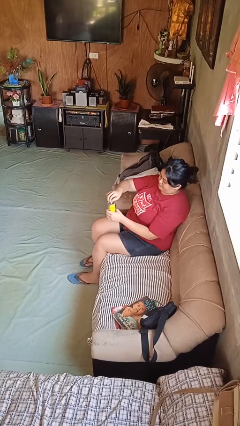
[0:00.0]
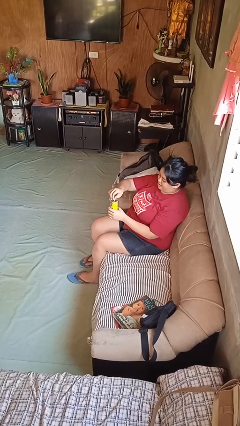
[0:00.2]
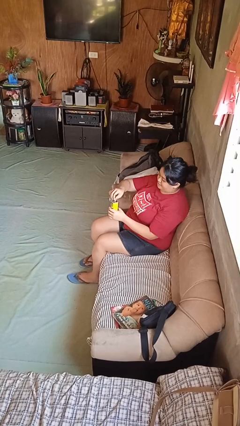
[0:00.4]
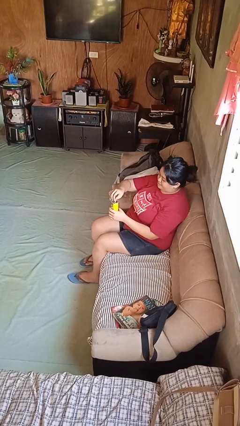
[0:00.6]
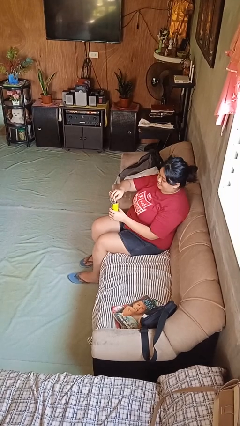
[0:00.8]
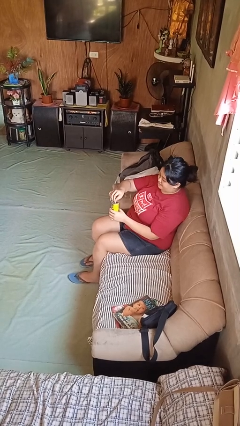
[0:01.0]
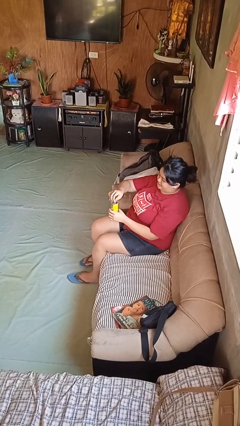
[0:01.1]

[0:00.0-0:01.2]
person opens beverage can

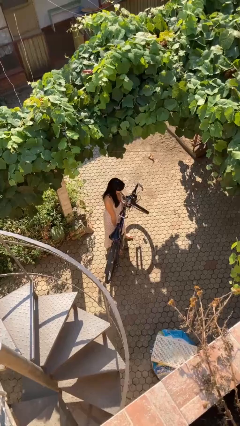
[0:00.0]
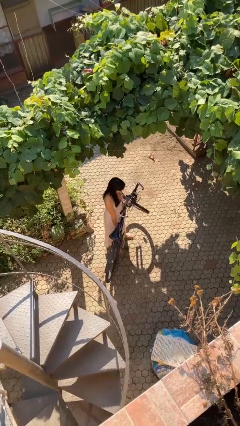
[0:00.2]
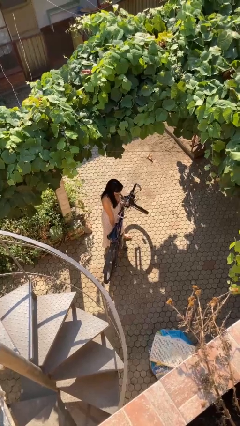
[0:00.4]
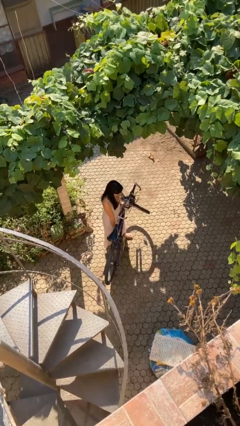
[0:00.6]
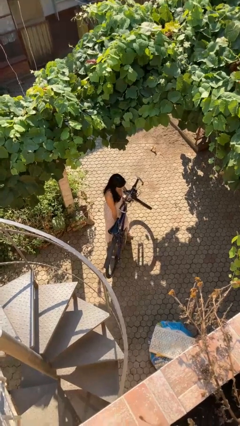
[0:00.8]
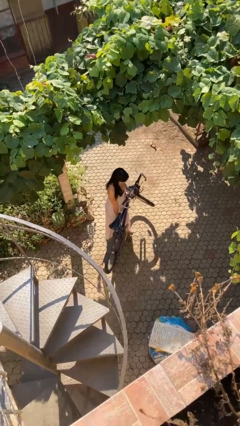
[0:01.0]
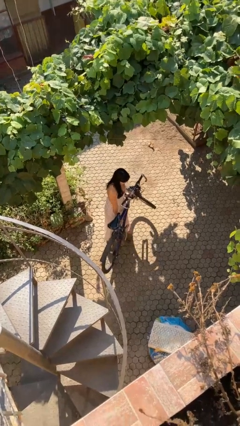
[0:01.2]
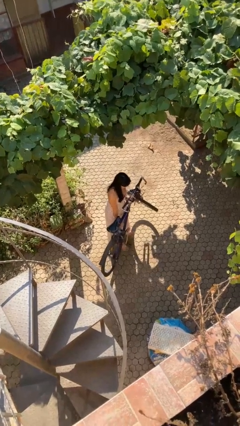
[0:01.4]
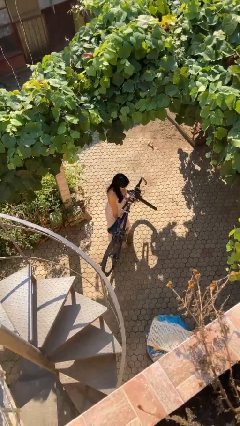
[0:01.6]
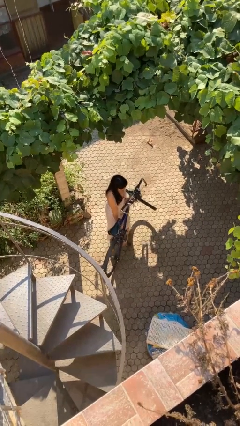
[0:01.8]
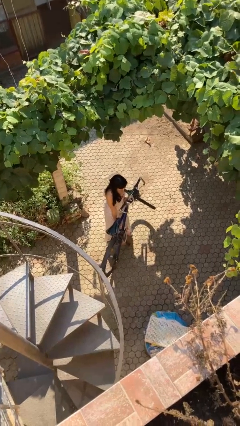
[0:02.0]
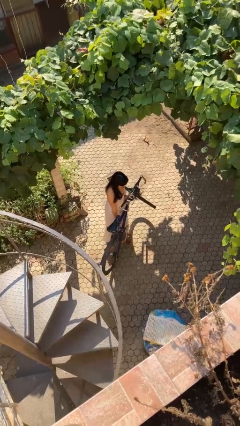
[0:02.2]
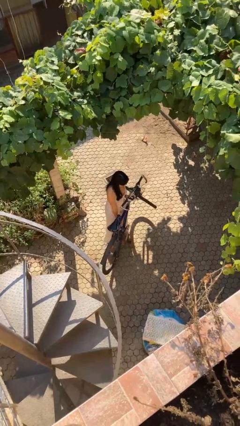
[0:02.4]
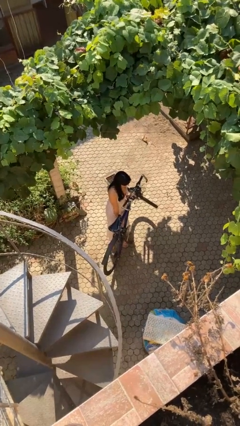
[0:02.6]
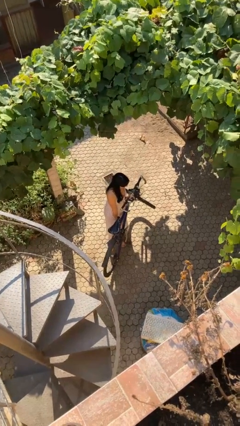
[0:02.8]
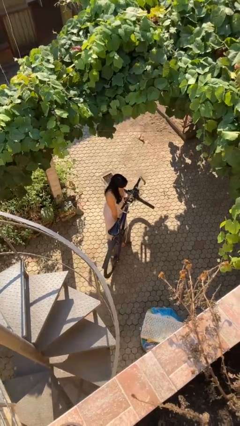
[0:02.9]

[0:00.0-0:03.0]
person carries bicycle

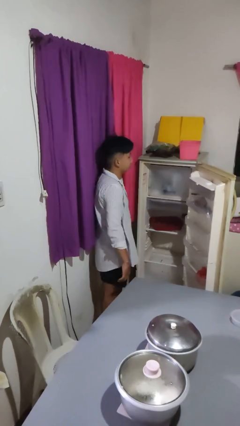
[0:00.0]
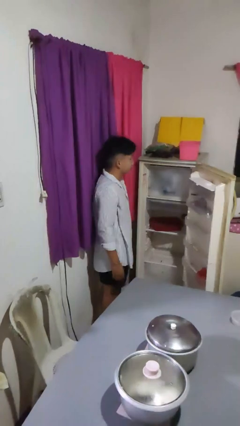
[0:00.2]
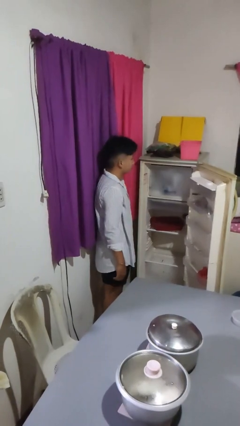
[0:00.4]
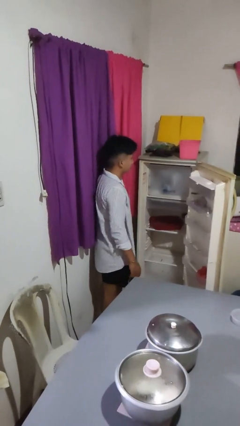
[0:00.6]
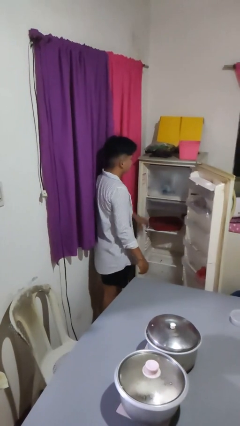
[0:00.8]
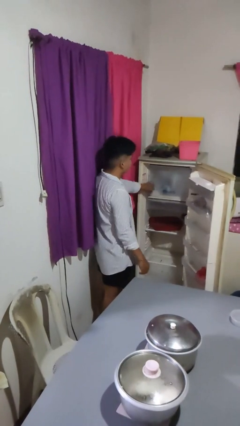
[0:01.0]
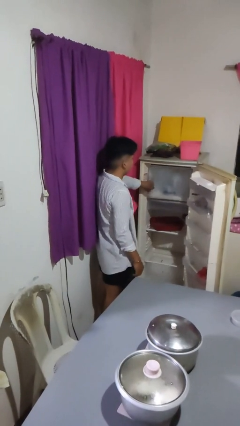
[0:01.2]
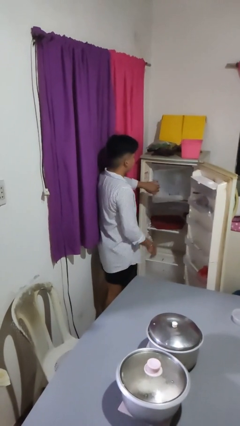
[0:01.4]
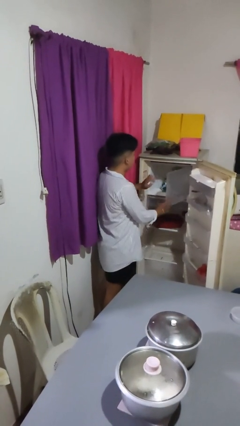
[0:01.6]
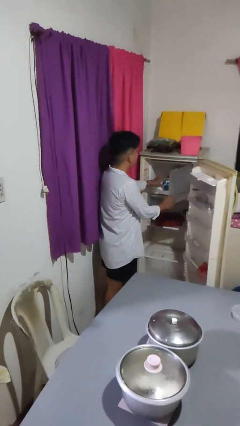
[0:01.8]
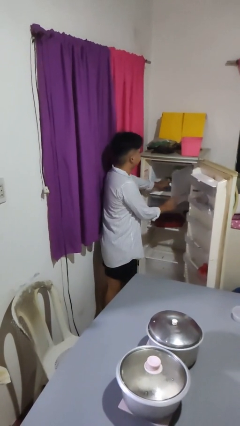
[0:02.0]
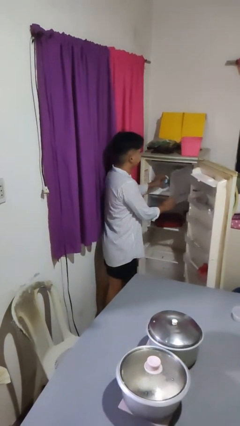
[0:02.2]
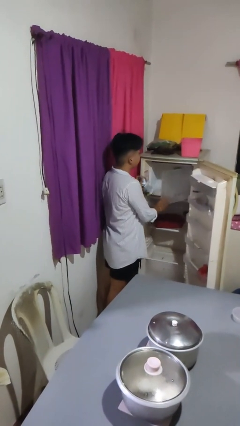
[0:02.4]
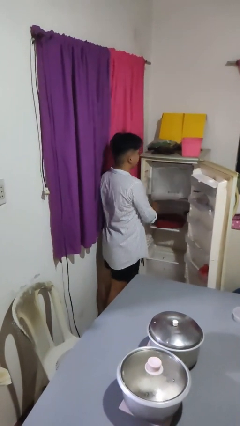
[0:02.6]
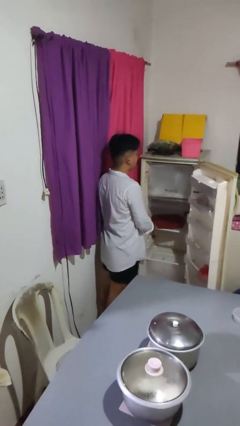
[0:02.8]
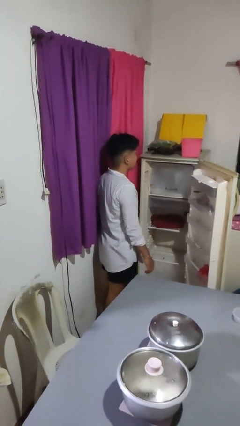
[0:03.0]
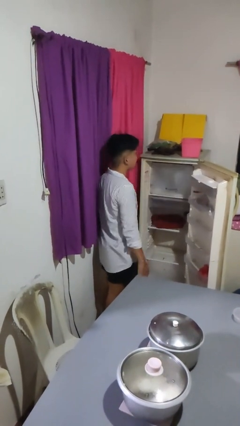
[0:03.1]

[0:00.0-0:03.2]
person takes object from refrigerator

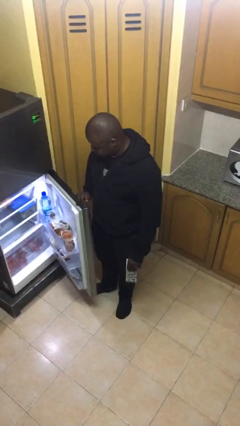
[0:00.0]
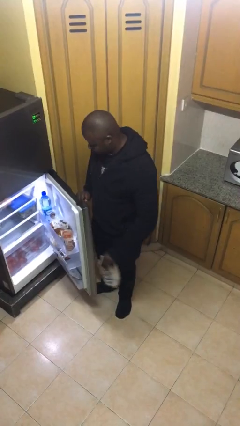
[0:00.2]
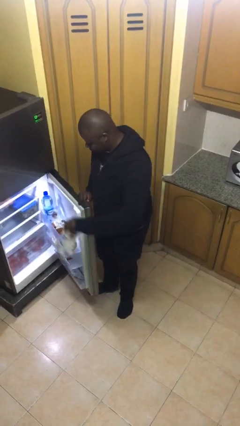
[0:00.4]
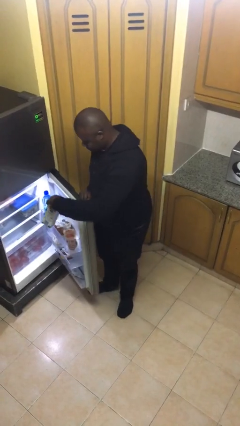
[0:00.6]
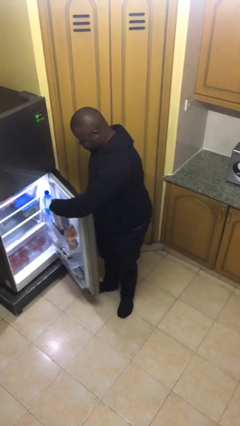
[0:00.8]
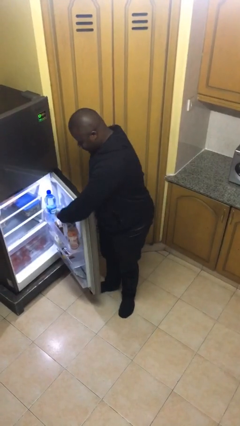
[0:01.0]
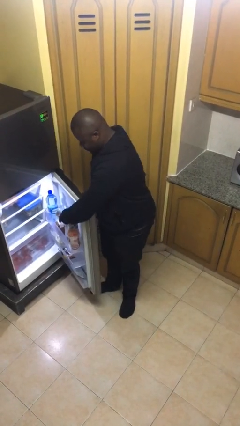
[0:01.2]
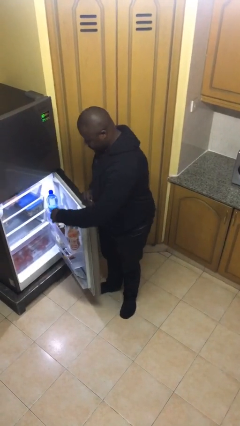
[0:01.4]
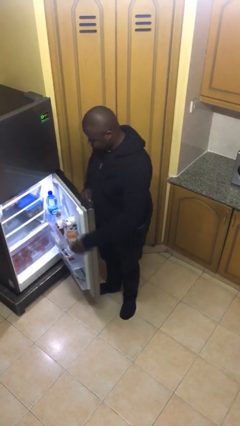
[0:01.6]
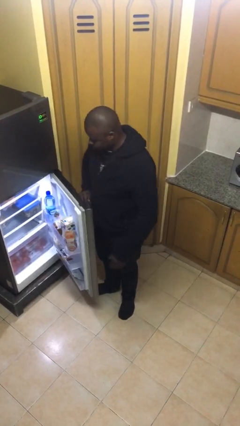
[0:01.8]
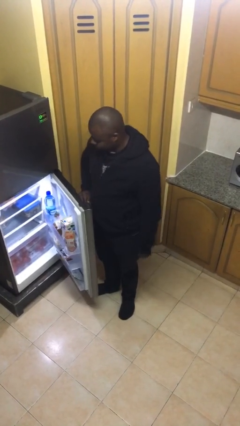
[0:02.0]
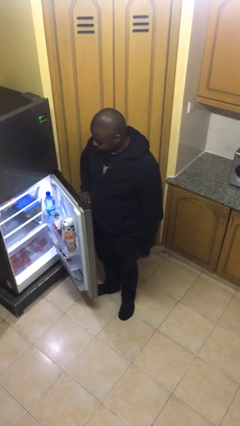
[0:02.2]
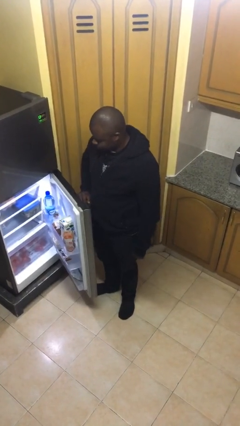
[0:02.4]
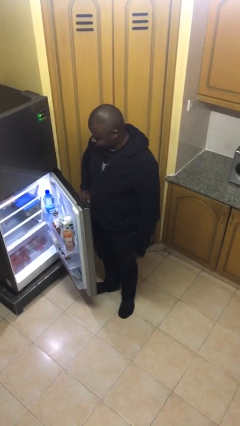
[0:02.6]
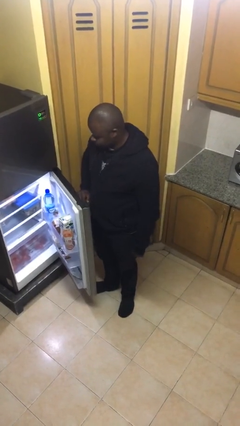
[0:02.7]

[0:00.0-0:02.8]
person puts object into refrigerator

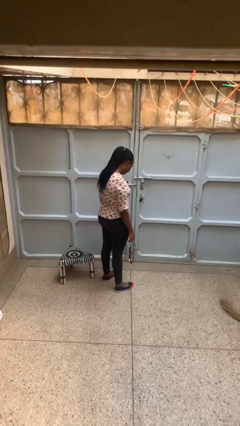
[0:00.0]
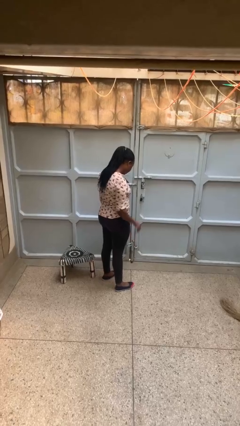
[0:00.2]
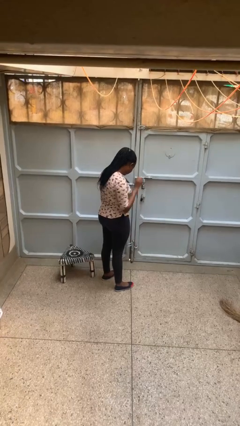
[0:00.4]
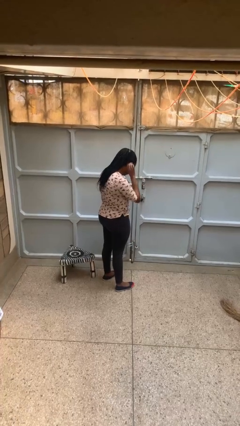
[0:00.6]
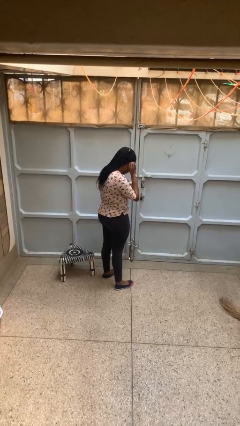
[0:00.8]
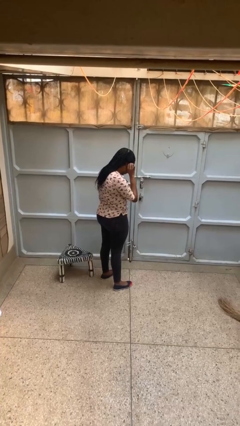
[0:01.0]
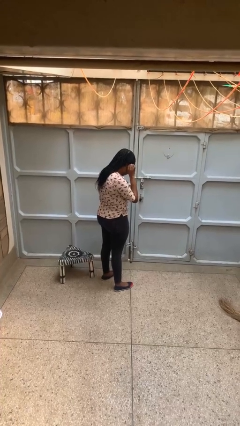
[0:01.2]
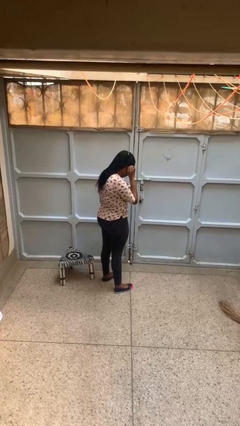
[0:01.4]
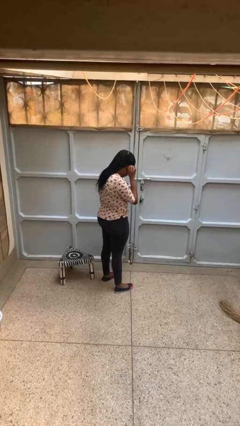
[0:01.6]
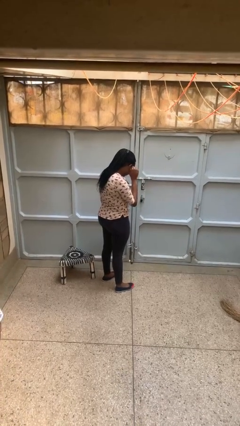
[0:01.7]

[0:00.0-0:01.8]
person gestures listen closely

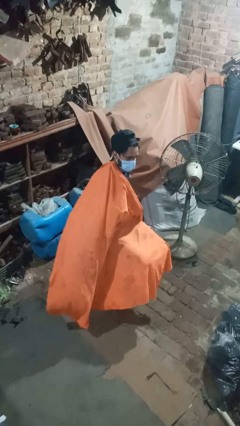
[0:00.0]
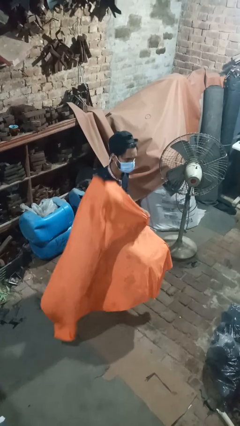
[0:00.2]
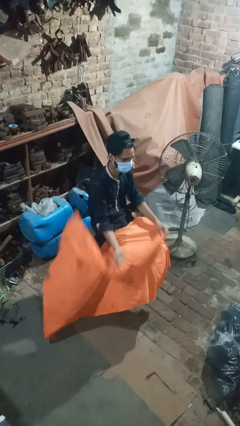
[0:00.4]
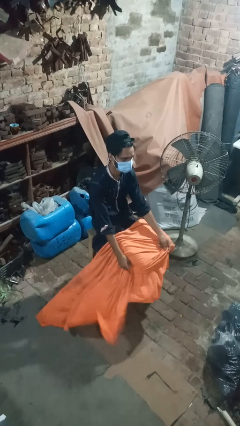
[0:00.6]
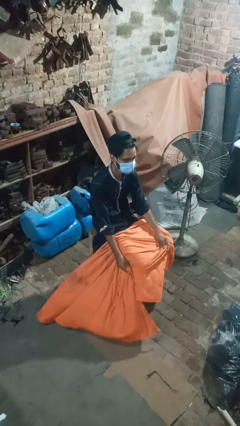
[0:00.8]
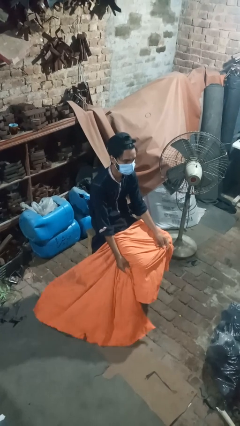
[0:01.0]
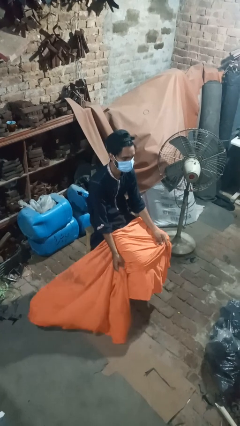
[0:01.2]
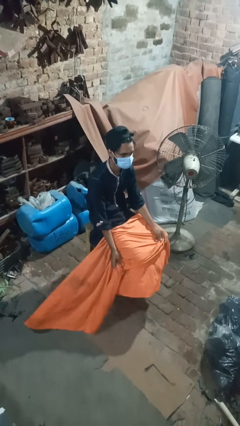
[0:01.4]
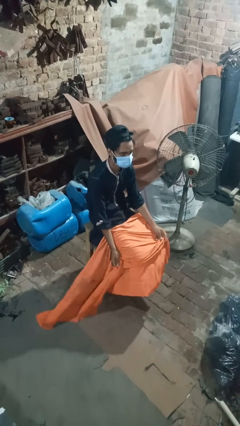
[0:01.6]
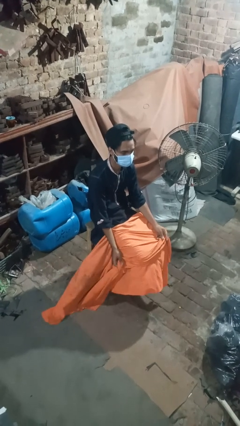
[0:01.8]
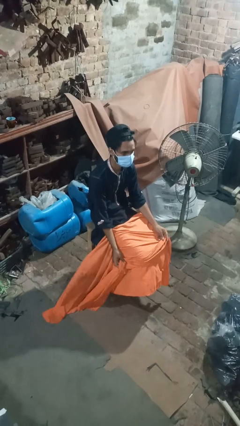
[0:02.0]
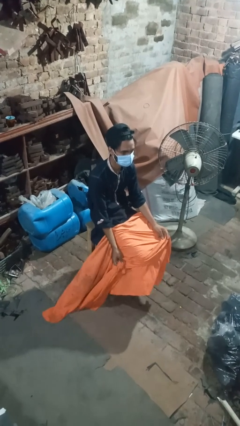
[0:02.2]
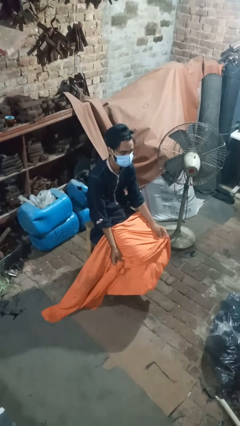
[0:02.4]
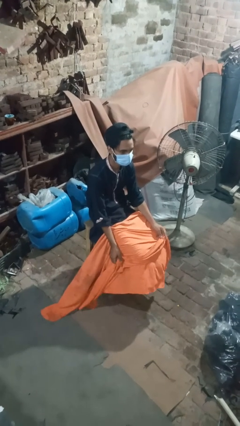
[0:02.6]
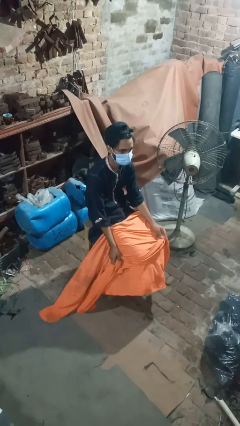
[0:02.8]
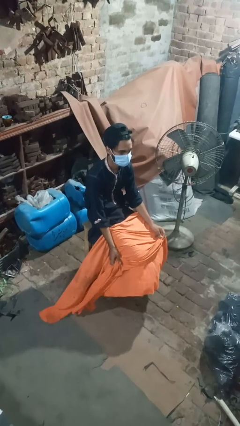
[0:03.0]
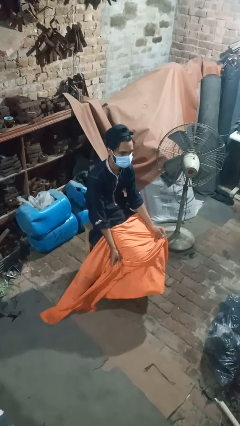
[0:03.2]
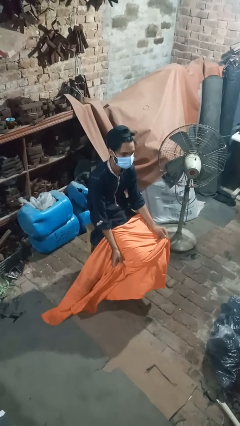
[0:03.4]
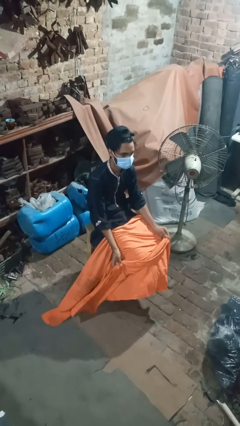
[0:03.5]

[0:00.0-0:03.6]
person uncovers with blanket

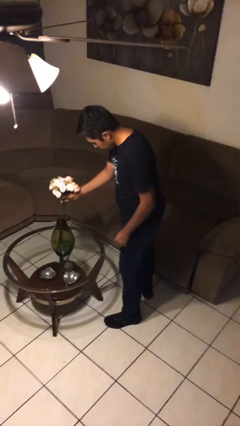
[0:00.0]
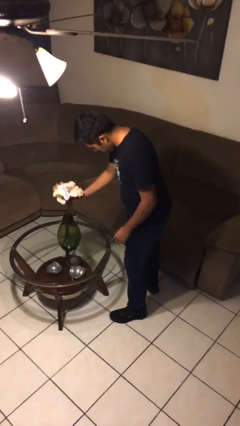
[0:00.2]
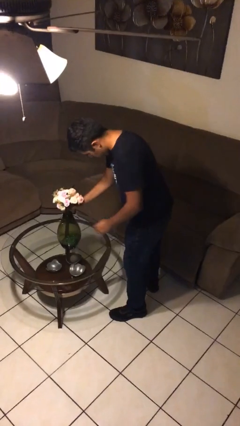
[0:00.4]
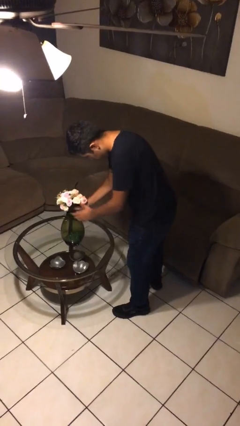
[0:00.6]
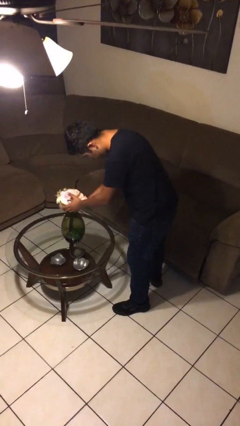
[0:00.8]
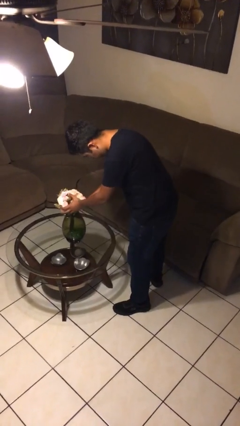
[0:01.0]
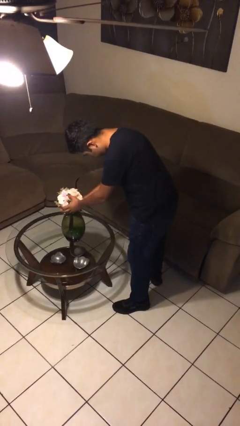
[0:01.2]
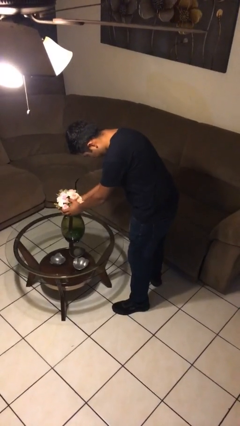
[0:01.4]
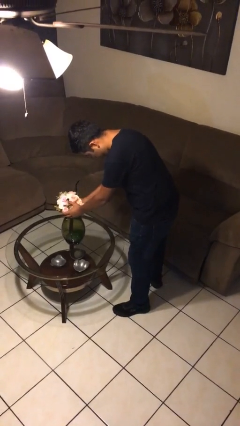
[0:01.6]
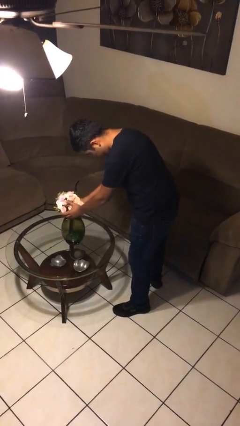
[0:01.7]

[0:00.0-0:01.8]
person arranges flowers in vase
